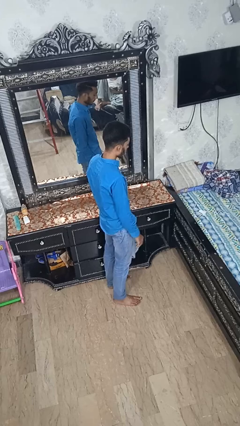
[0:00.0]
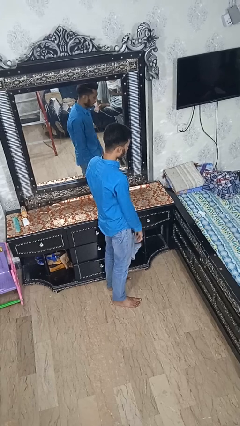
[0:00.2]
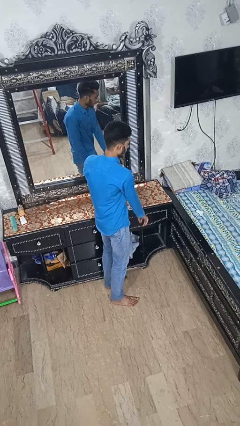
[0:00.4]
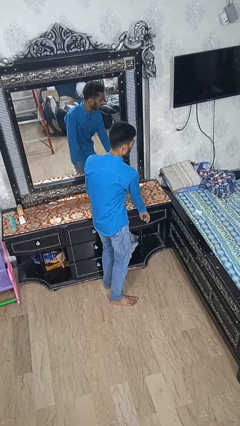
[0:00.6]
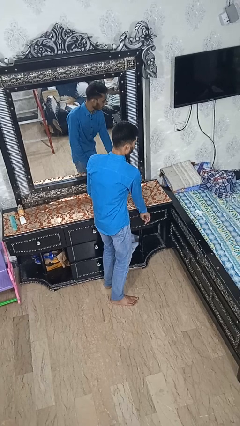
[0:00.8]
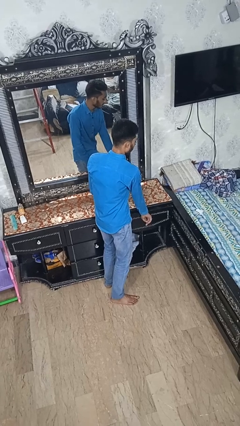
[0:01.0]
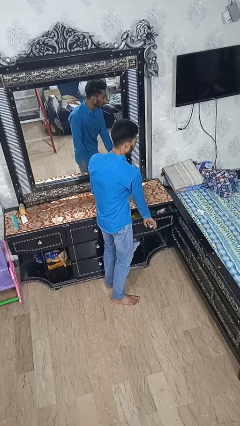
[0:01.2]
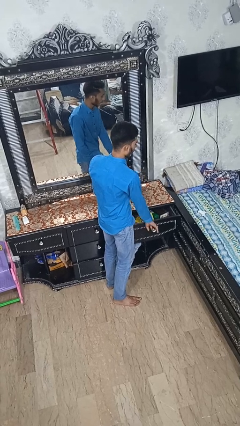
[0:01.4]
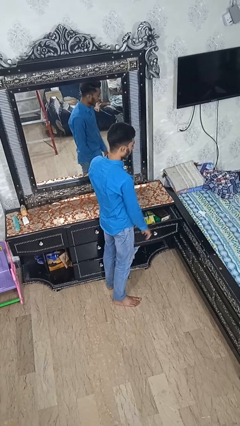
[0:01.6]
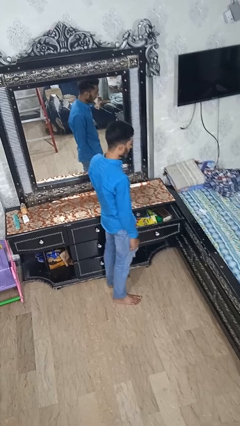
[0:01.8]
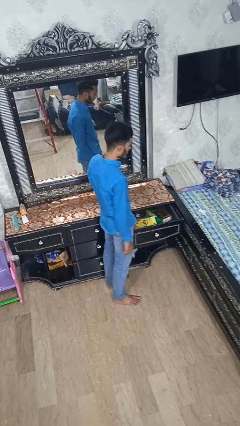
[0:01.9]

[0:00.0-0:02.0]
person opens dresser drawer

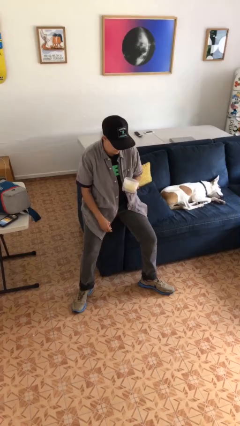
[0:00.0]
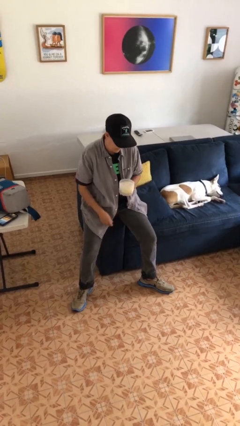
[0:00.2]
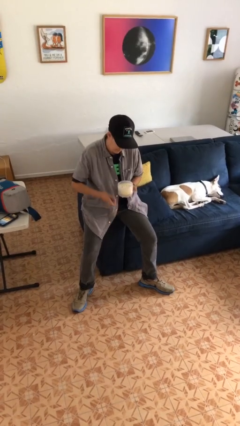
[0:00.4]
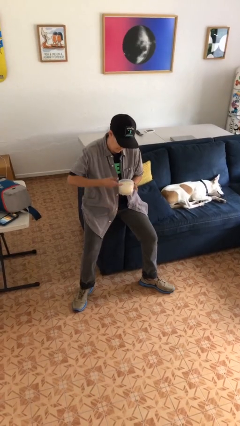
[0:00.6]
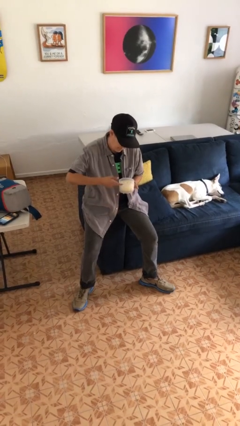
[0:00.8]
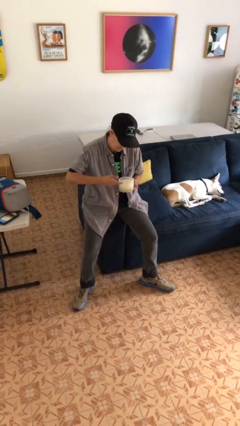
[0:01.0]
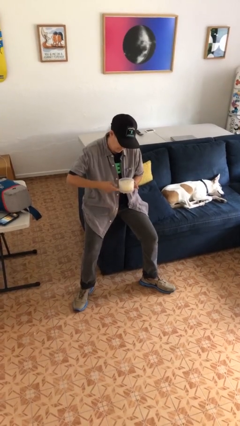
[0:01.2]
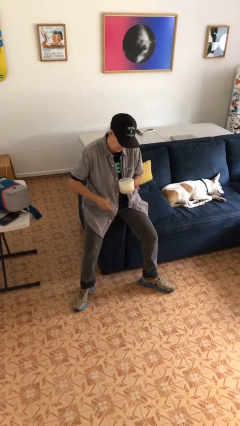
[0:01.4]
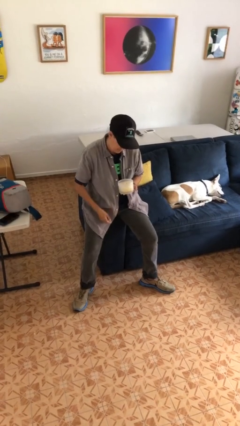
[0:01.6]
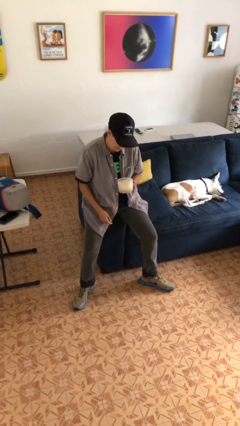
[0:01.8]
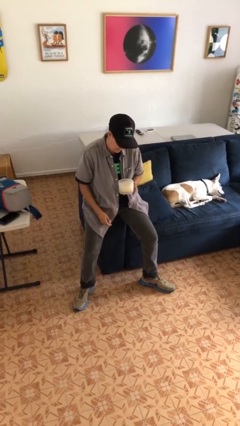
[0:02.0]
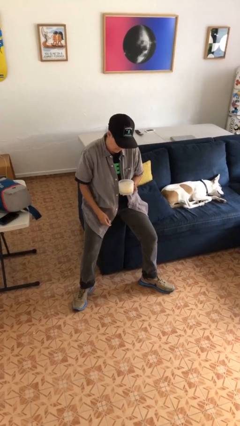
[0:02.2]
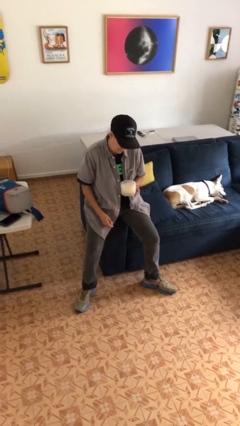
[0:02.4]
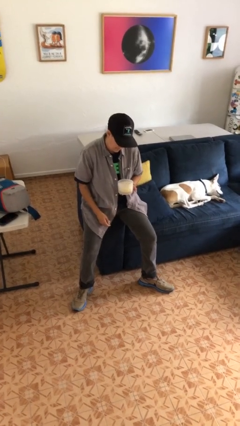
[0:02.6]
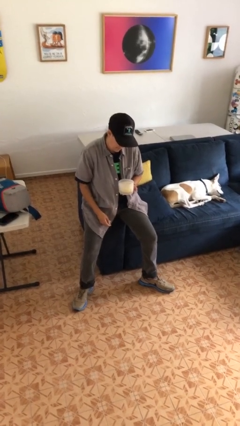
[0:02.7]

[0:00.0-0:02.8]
person taps object with finger

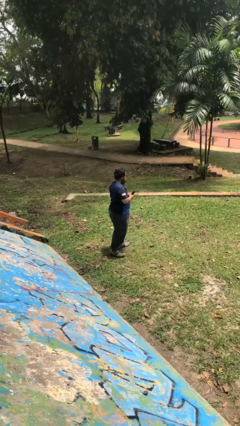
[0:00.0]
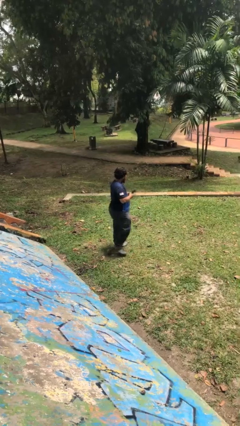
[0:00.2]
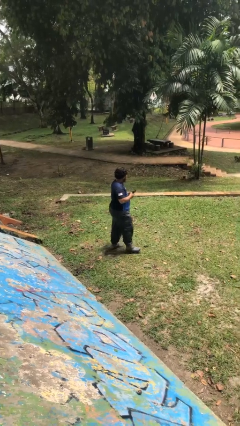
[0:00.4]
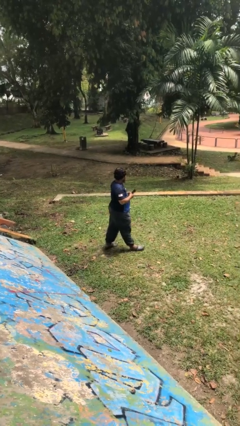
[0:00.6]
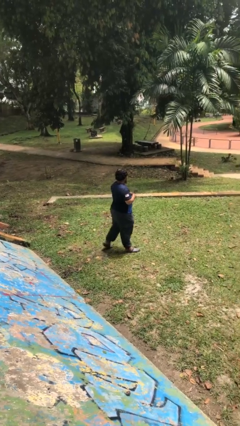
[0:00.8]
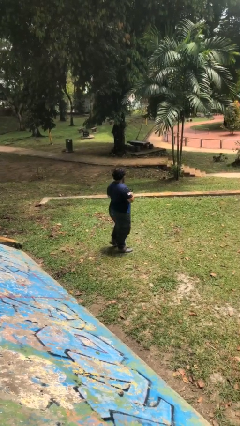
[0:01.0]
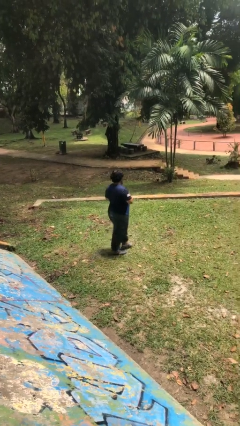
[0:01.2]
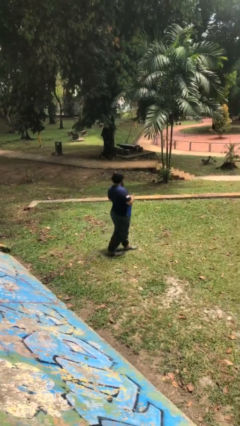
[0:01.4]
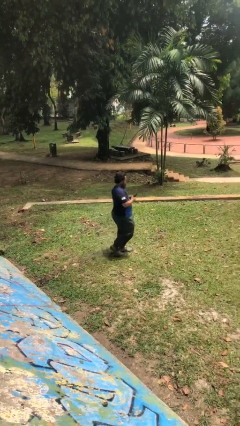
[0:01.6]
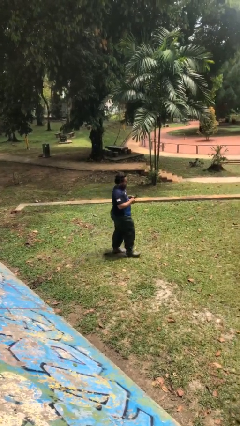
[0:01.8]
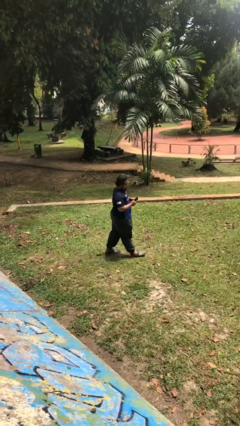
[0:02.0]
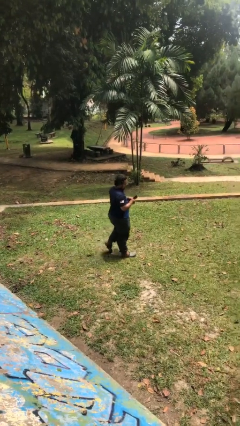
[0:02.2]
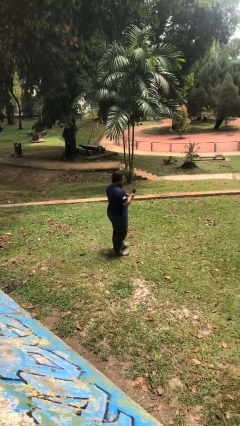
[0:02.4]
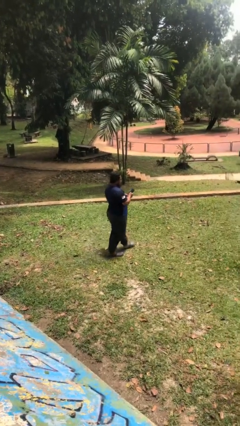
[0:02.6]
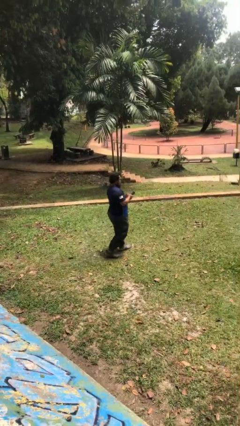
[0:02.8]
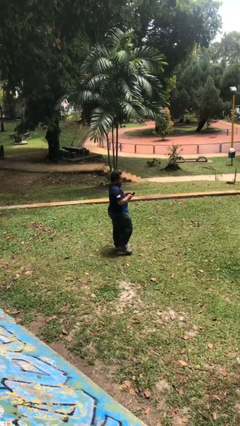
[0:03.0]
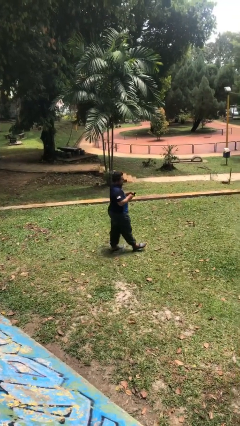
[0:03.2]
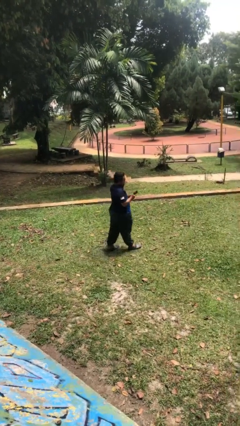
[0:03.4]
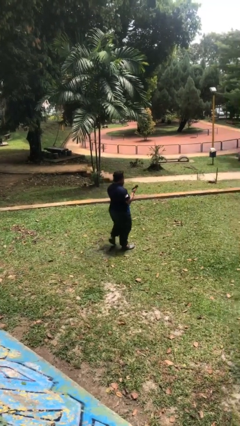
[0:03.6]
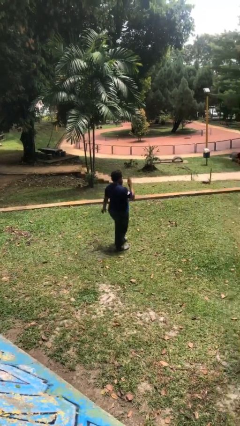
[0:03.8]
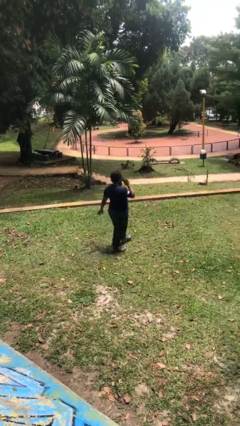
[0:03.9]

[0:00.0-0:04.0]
person texts on phone

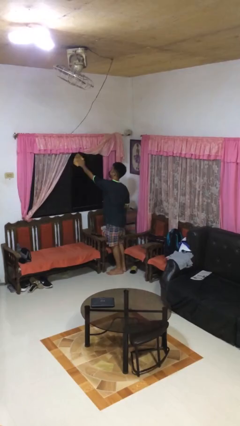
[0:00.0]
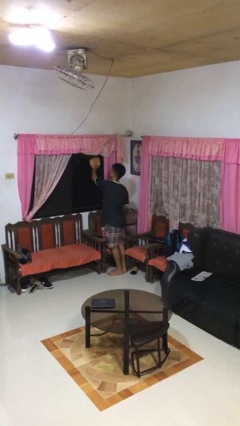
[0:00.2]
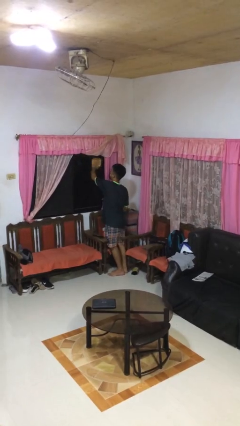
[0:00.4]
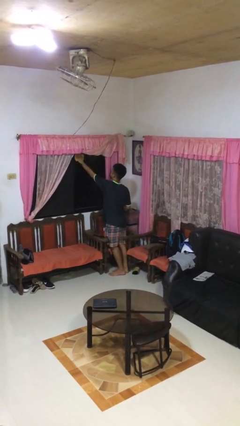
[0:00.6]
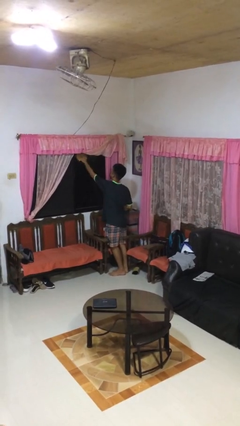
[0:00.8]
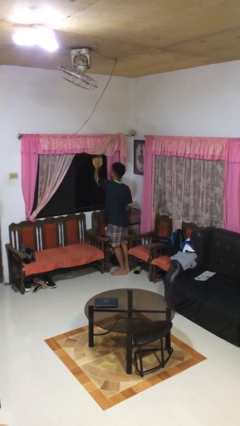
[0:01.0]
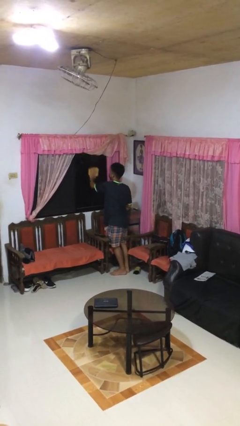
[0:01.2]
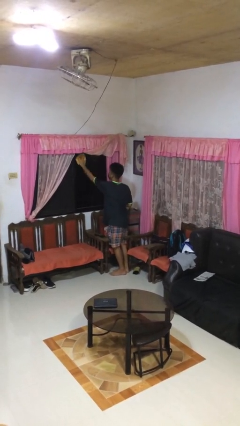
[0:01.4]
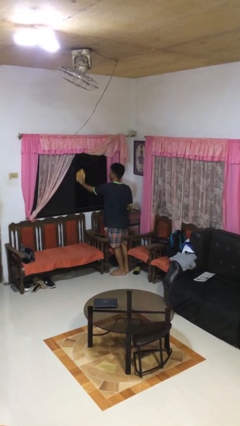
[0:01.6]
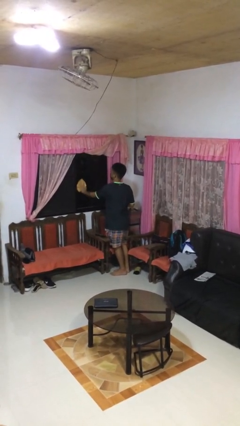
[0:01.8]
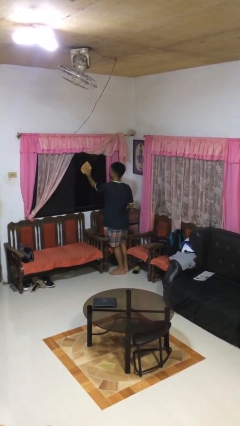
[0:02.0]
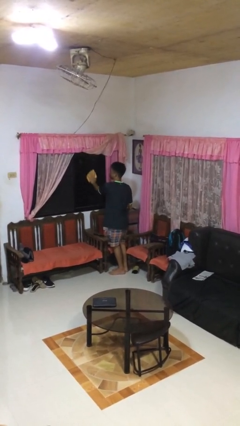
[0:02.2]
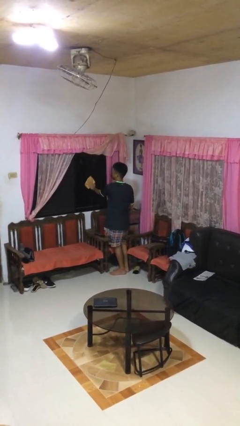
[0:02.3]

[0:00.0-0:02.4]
person washes window

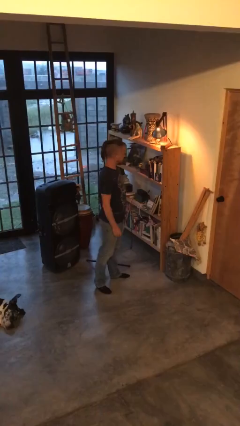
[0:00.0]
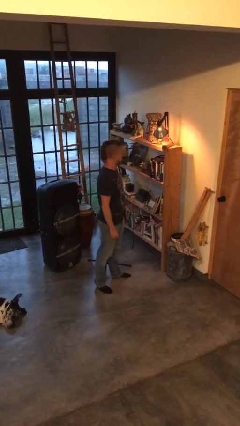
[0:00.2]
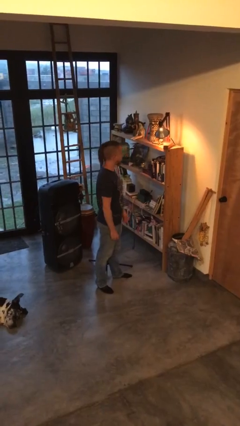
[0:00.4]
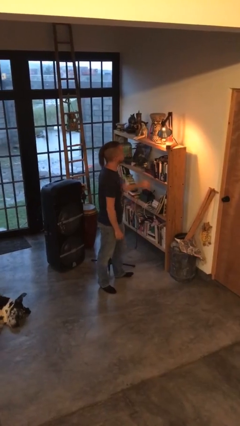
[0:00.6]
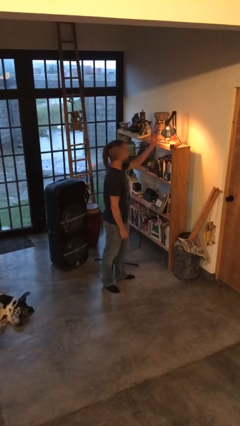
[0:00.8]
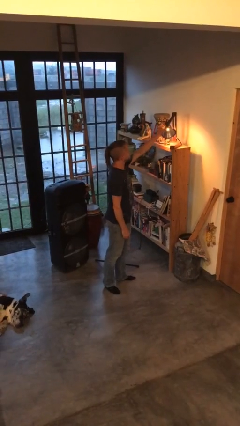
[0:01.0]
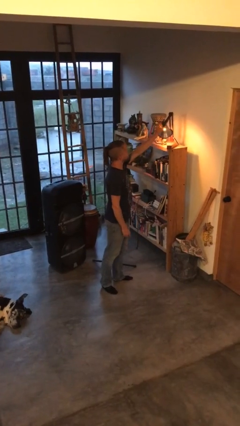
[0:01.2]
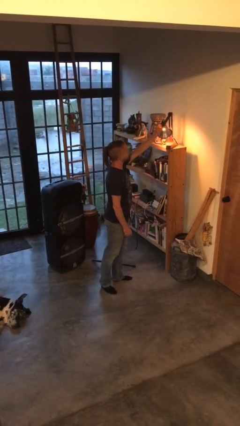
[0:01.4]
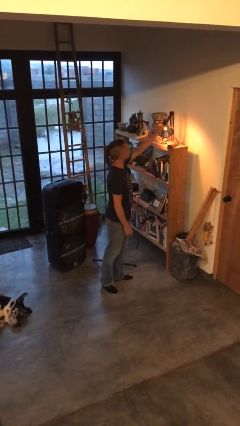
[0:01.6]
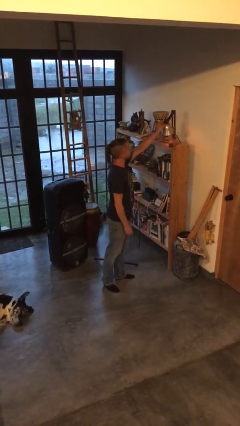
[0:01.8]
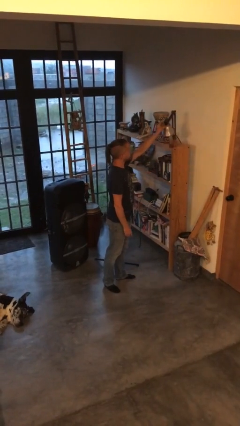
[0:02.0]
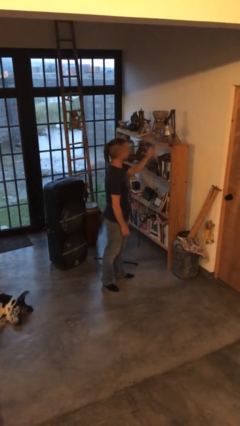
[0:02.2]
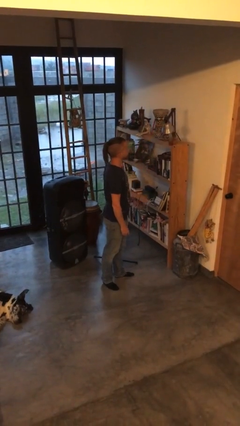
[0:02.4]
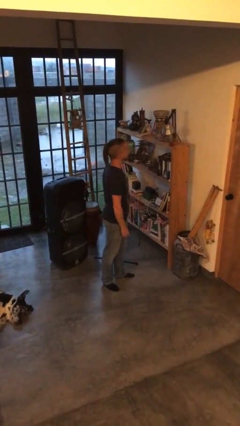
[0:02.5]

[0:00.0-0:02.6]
person turns off lamp

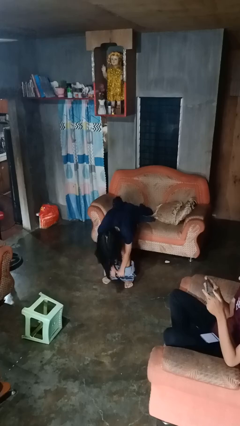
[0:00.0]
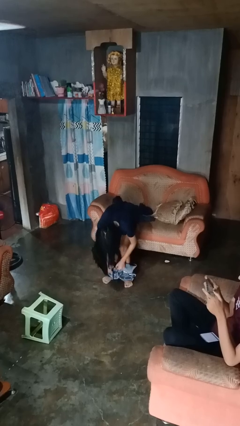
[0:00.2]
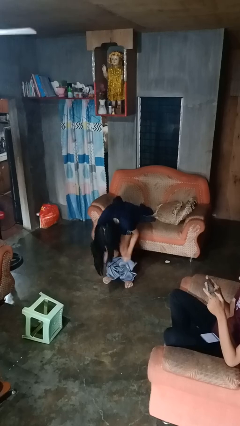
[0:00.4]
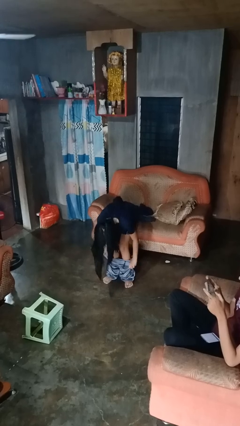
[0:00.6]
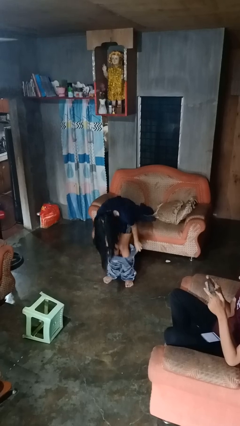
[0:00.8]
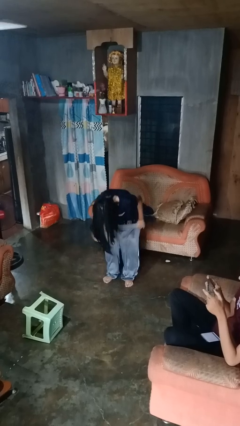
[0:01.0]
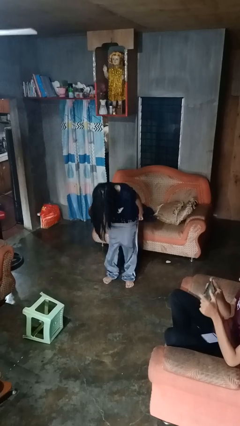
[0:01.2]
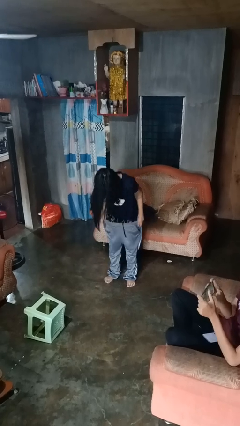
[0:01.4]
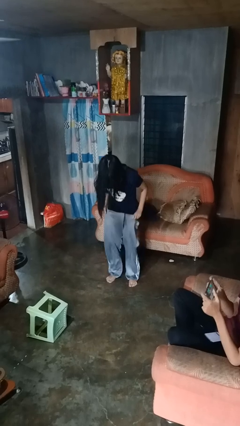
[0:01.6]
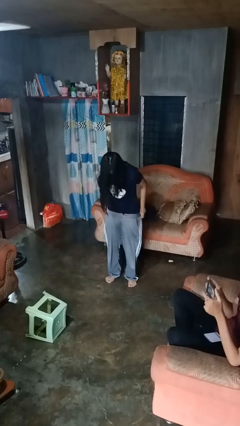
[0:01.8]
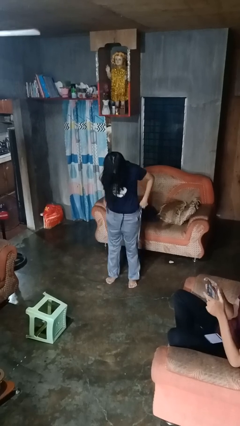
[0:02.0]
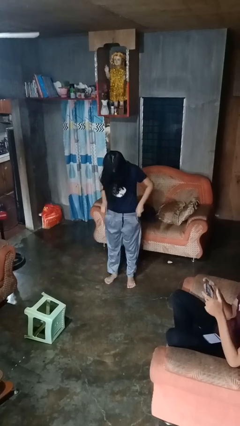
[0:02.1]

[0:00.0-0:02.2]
person puts on pants

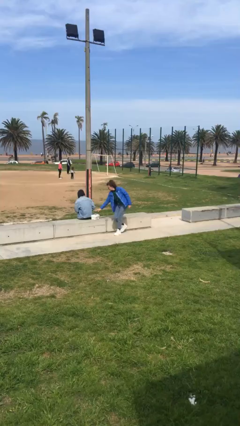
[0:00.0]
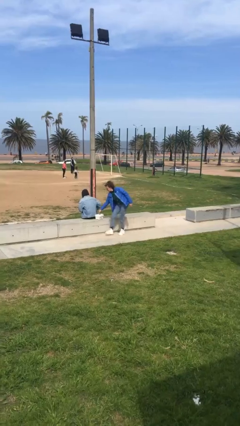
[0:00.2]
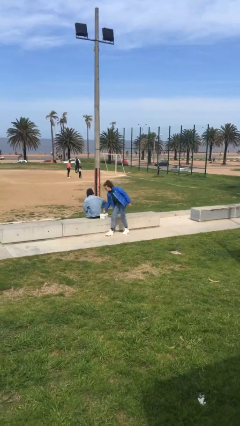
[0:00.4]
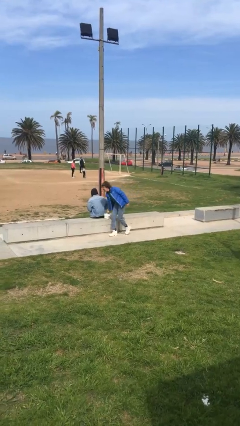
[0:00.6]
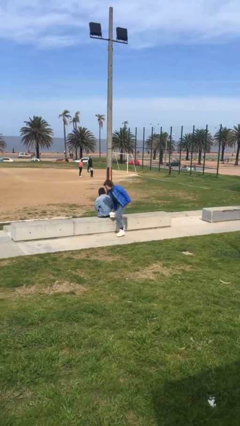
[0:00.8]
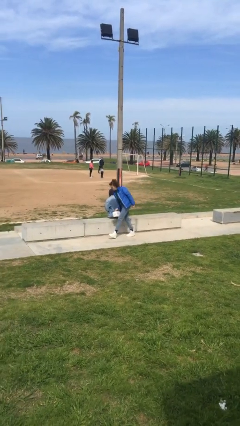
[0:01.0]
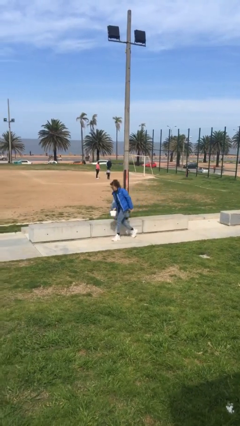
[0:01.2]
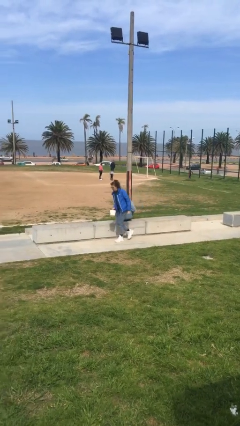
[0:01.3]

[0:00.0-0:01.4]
person steals object from person
